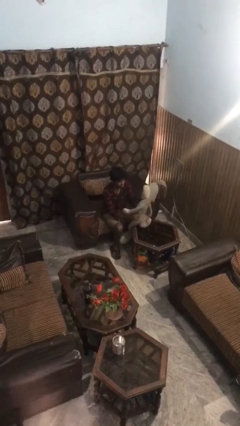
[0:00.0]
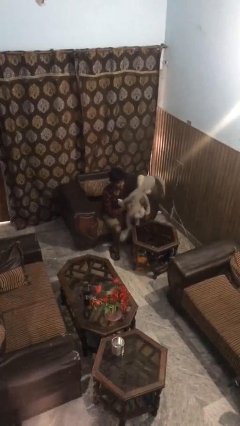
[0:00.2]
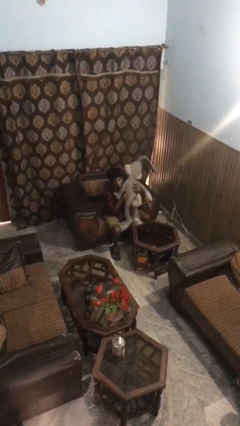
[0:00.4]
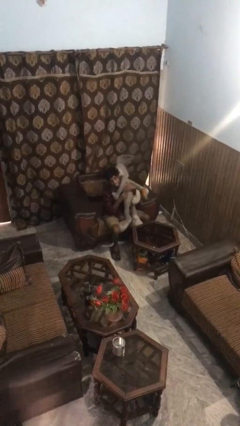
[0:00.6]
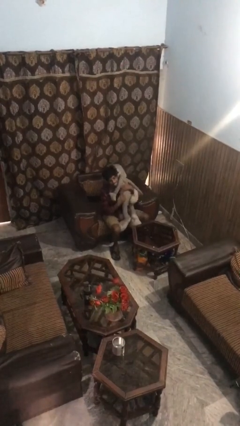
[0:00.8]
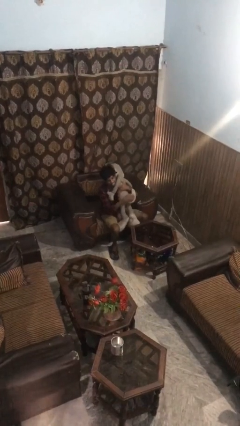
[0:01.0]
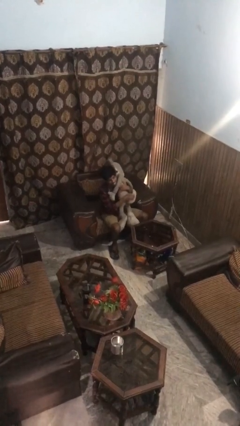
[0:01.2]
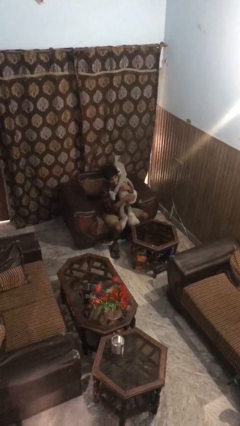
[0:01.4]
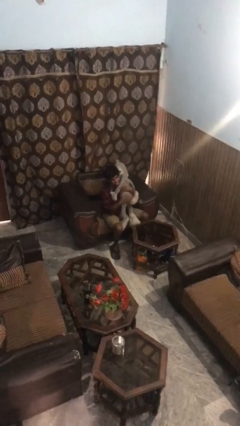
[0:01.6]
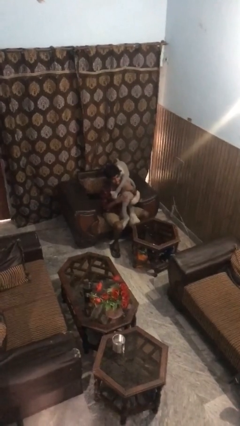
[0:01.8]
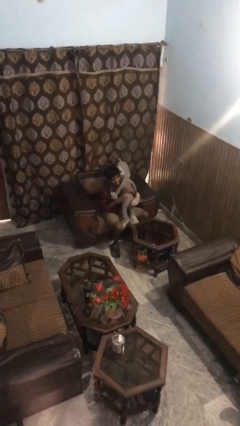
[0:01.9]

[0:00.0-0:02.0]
person hugs stuffed animal

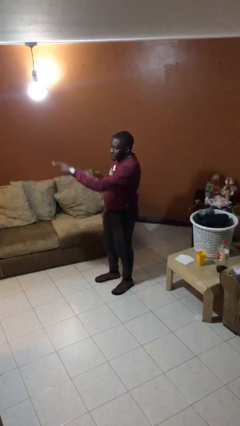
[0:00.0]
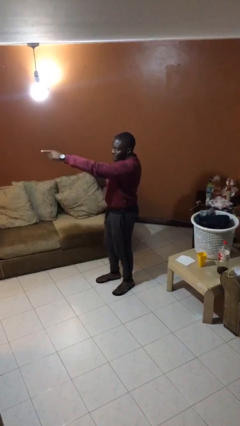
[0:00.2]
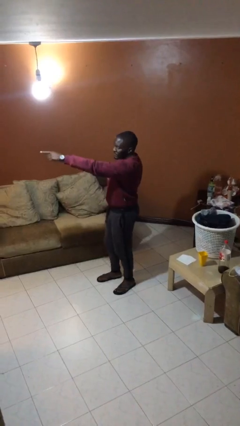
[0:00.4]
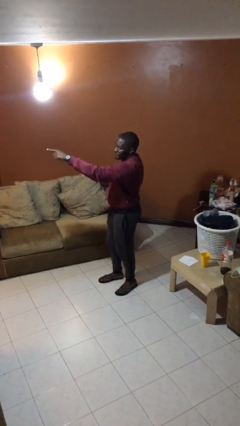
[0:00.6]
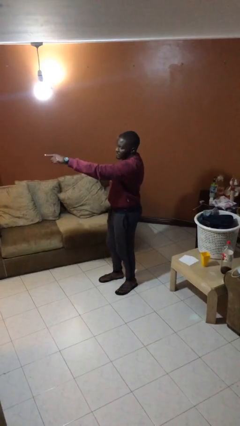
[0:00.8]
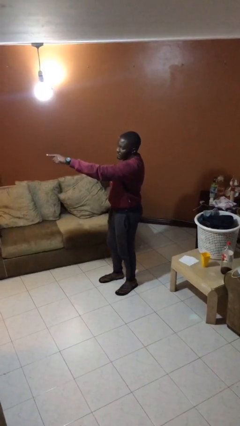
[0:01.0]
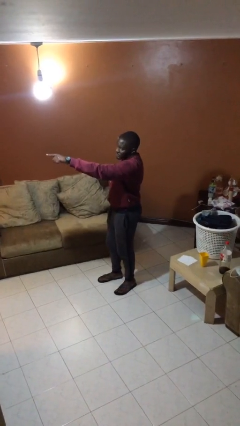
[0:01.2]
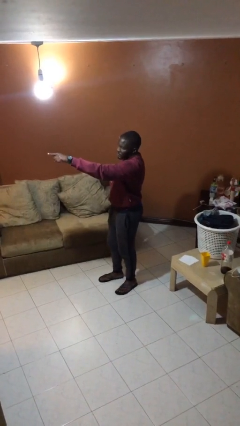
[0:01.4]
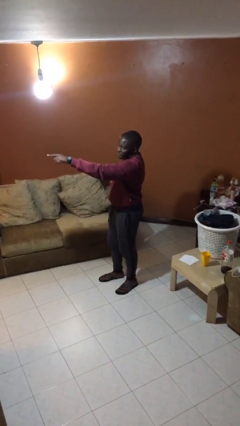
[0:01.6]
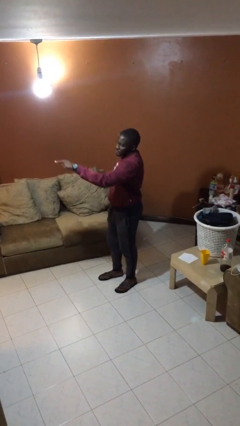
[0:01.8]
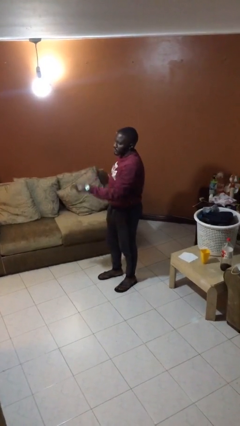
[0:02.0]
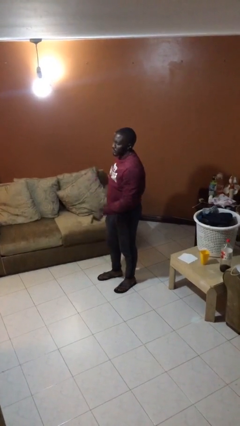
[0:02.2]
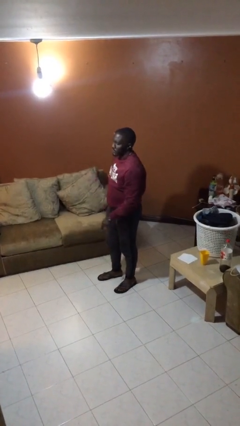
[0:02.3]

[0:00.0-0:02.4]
person points at person

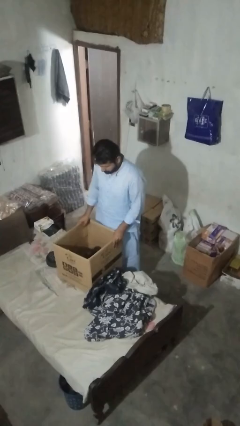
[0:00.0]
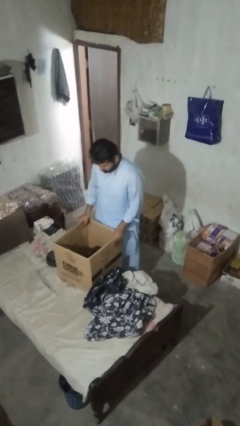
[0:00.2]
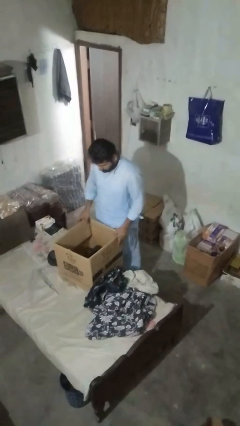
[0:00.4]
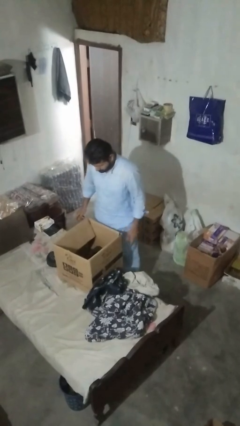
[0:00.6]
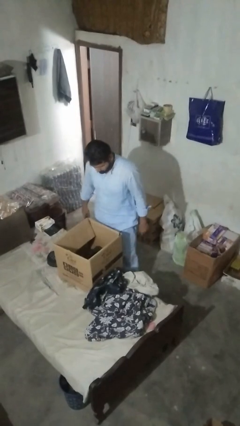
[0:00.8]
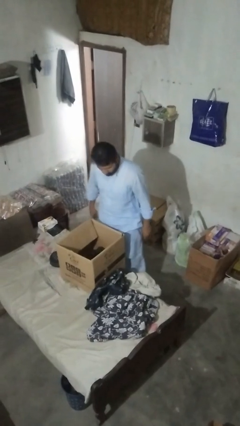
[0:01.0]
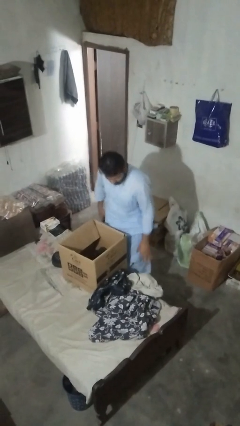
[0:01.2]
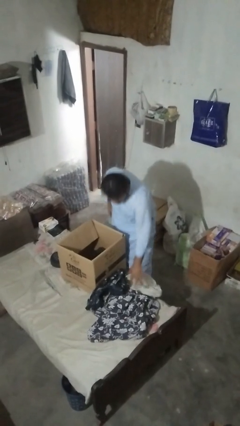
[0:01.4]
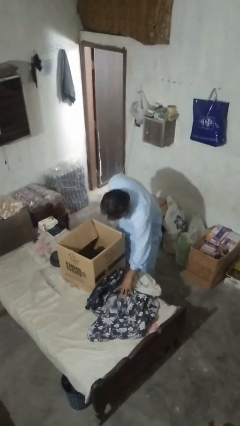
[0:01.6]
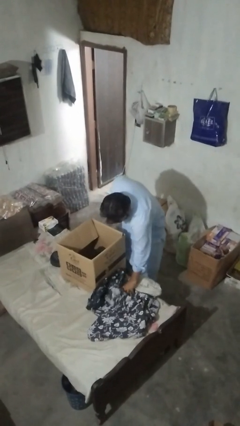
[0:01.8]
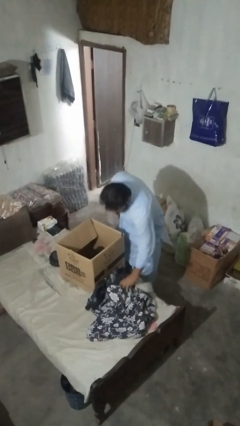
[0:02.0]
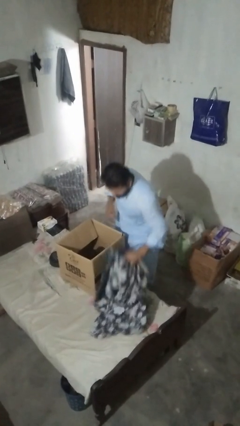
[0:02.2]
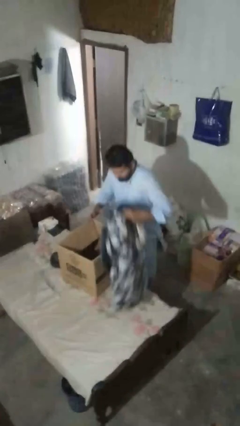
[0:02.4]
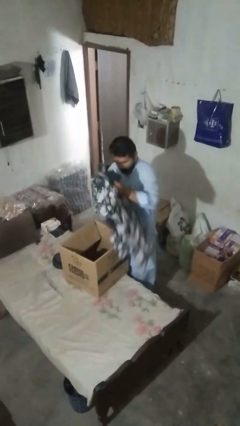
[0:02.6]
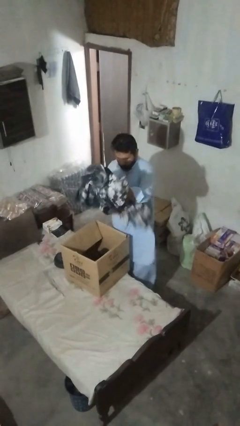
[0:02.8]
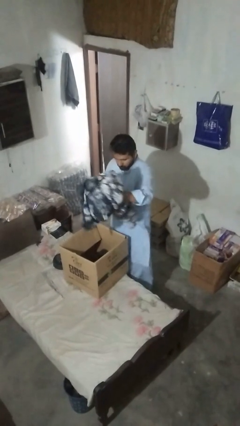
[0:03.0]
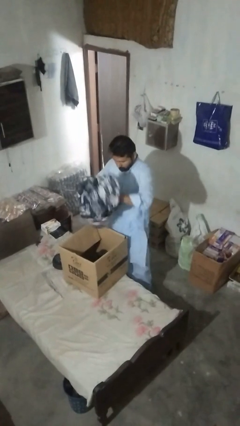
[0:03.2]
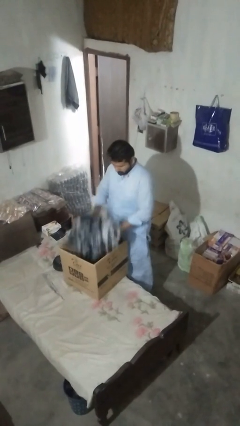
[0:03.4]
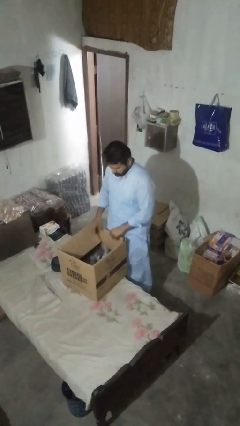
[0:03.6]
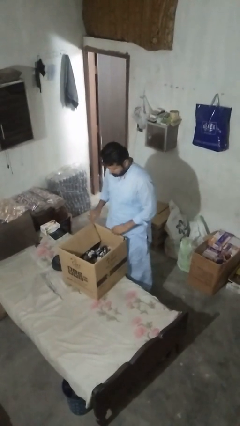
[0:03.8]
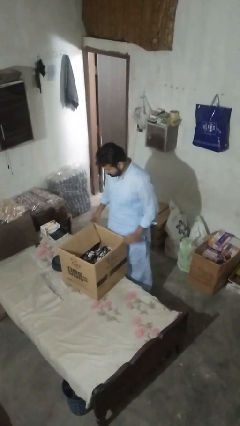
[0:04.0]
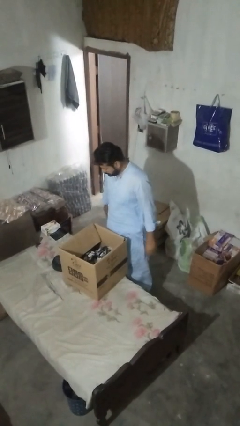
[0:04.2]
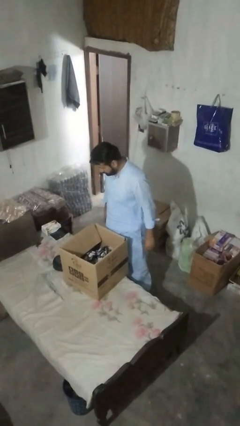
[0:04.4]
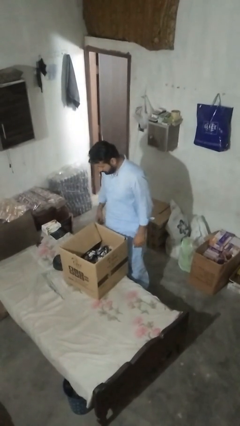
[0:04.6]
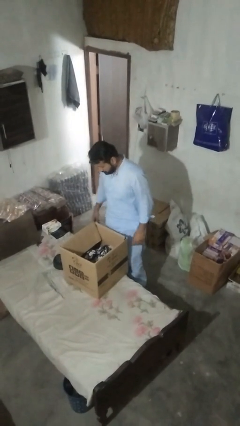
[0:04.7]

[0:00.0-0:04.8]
person loads clotheswasher

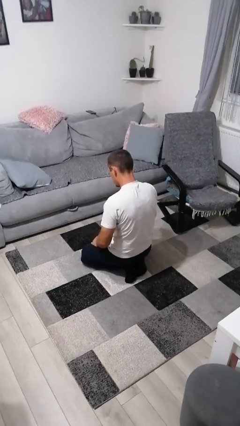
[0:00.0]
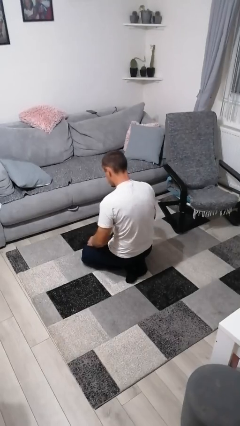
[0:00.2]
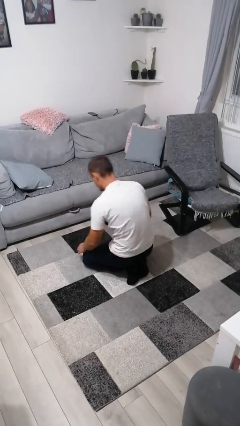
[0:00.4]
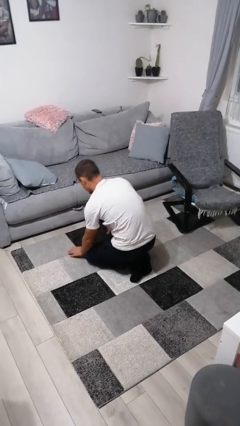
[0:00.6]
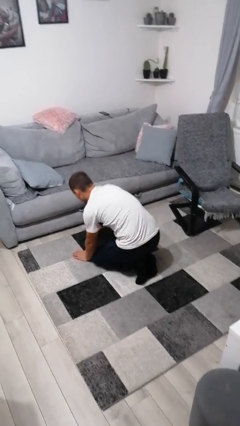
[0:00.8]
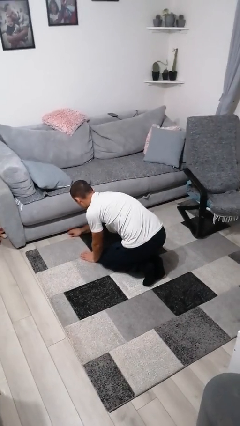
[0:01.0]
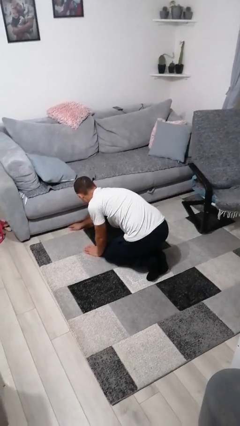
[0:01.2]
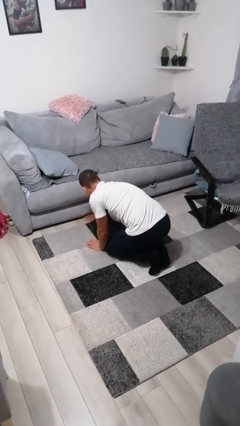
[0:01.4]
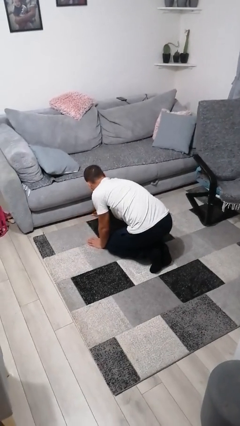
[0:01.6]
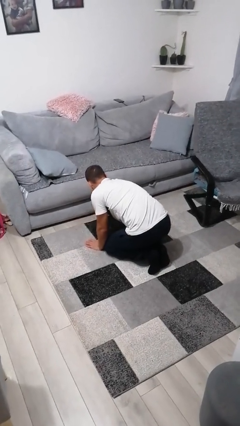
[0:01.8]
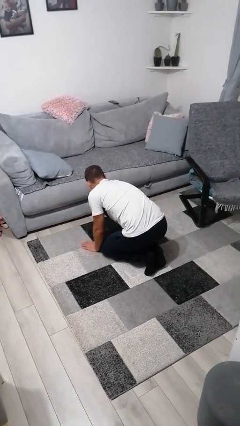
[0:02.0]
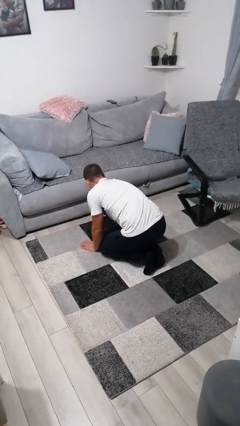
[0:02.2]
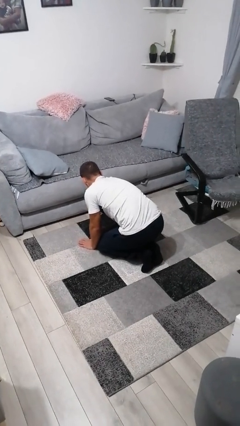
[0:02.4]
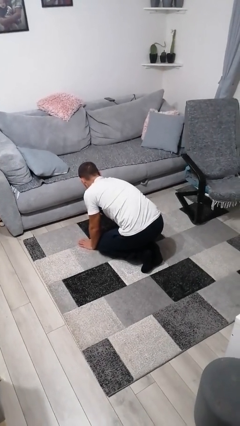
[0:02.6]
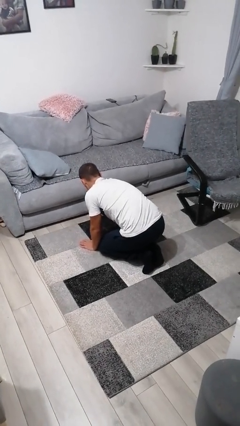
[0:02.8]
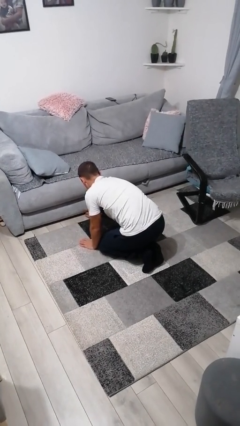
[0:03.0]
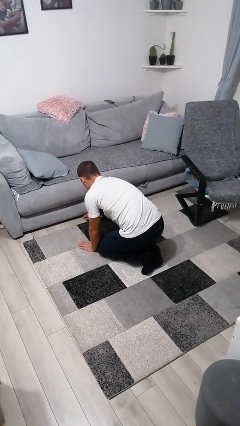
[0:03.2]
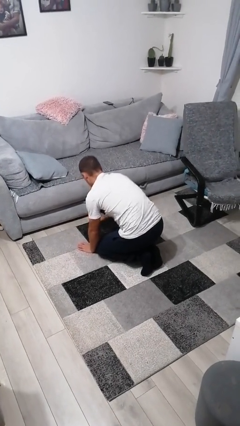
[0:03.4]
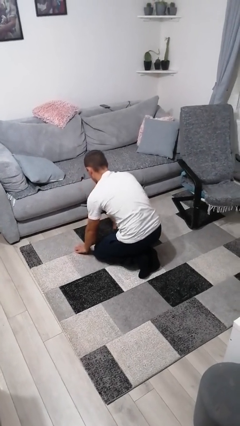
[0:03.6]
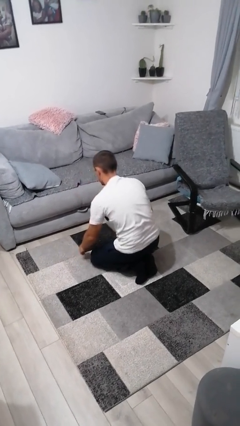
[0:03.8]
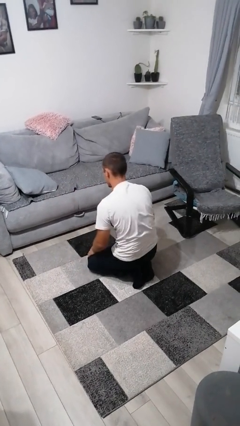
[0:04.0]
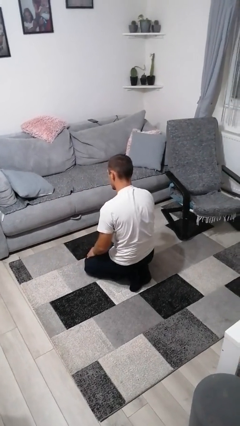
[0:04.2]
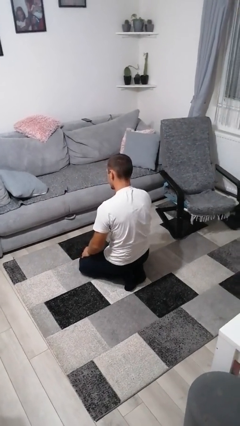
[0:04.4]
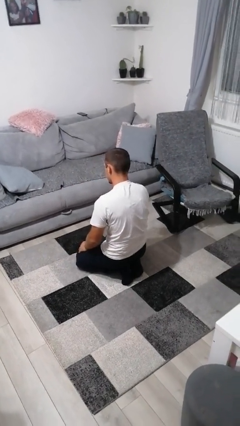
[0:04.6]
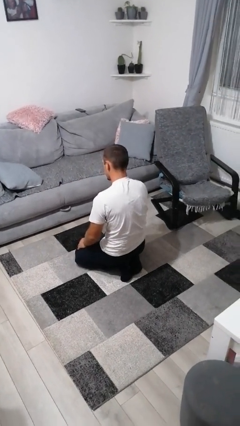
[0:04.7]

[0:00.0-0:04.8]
person searches under couch

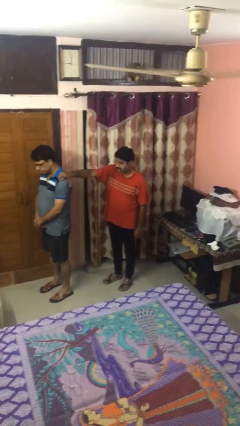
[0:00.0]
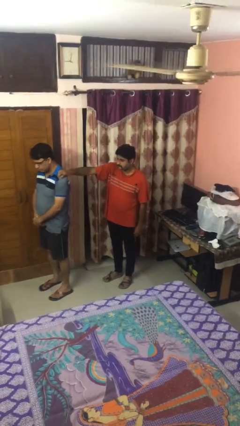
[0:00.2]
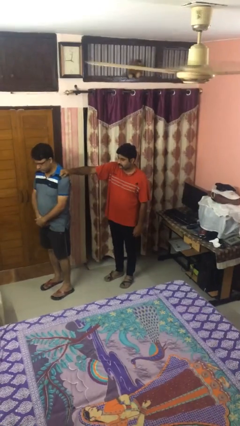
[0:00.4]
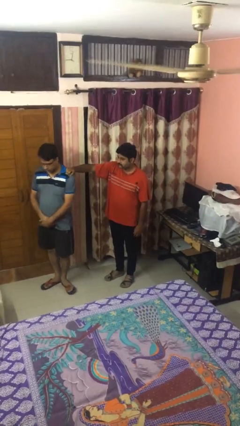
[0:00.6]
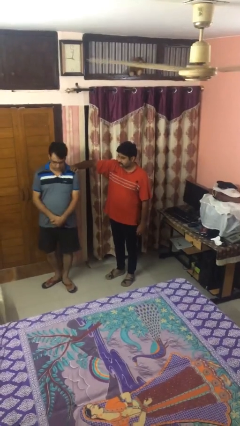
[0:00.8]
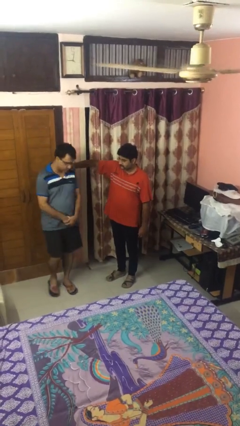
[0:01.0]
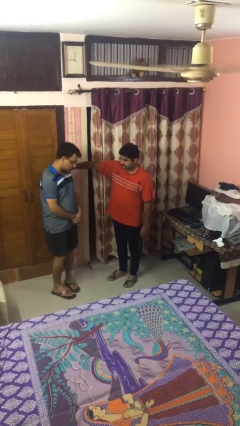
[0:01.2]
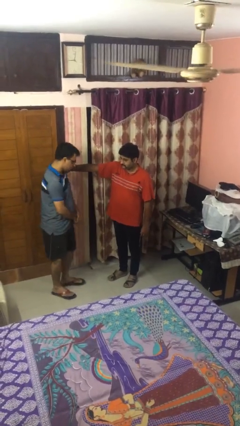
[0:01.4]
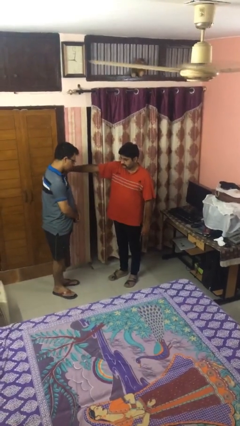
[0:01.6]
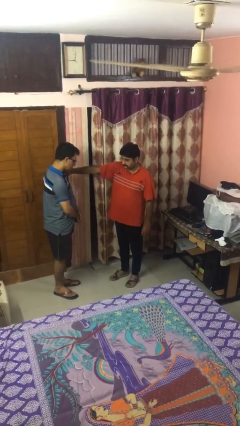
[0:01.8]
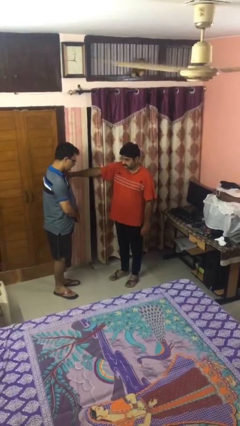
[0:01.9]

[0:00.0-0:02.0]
person spins person around

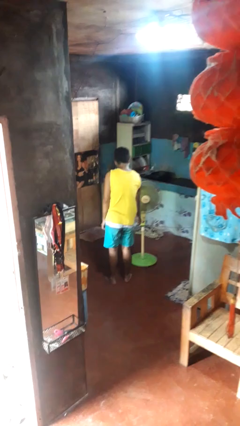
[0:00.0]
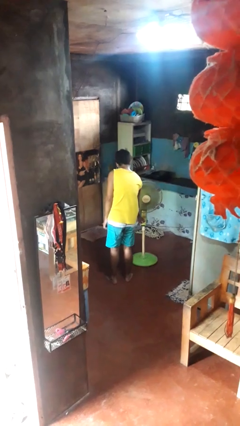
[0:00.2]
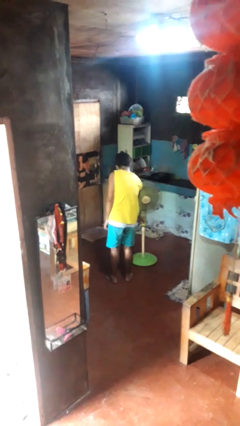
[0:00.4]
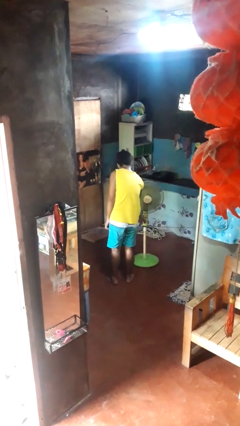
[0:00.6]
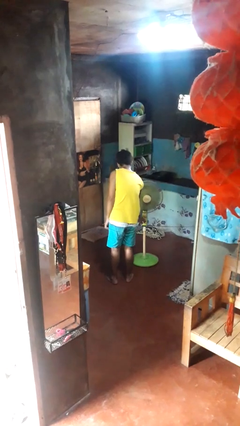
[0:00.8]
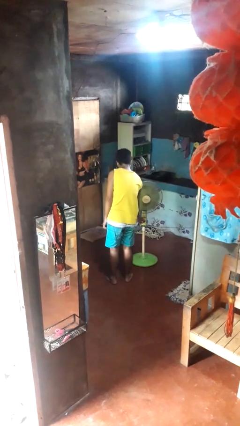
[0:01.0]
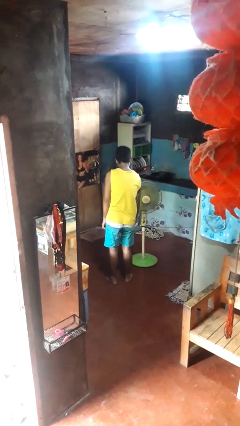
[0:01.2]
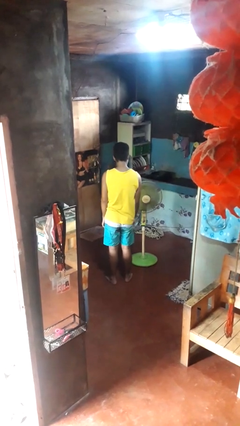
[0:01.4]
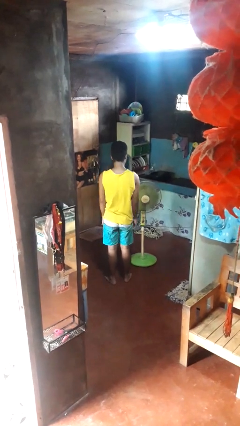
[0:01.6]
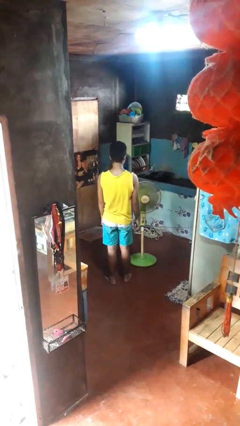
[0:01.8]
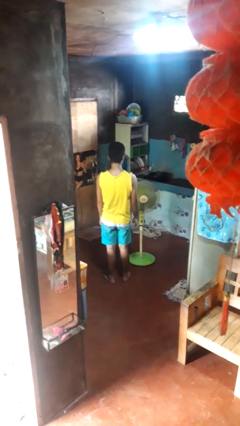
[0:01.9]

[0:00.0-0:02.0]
person turns off fan
